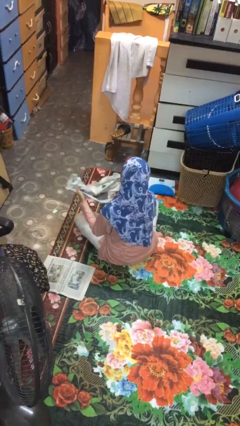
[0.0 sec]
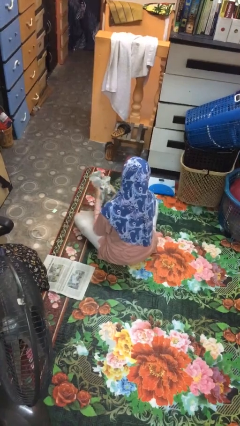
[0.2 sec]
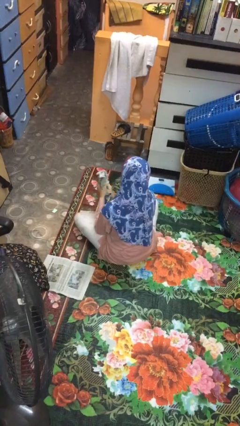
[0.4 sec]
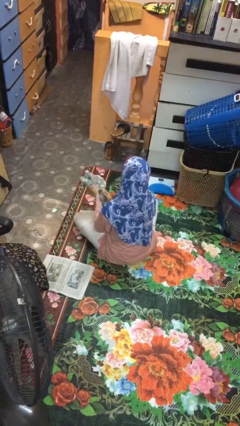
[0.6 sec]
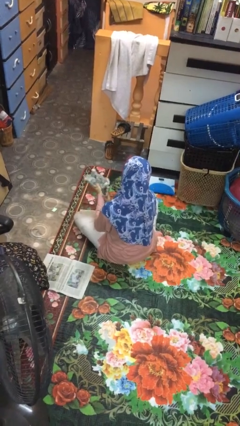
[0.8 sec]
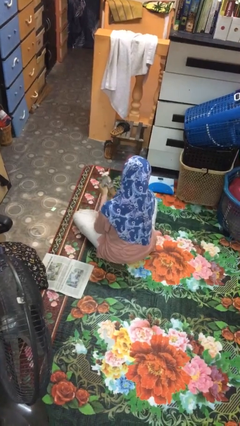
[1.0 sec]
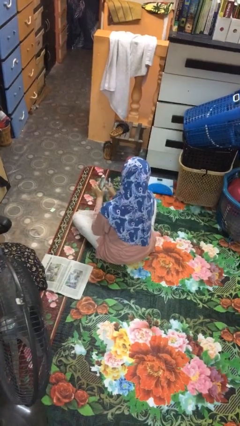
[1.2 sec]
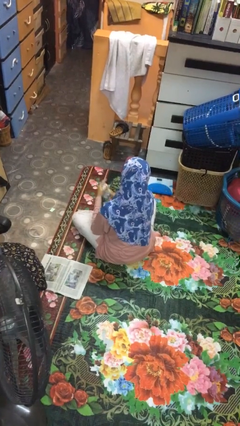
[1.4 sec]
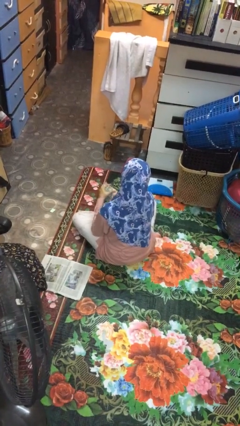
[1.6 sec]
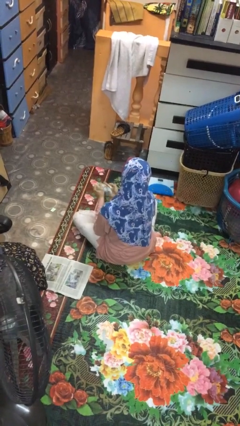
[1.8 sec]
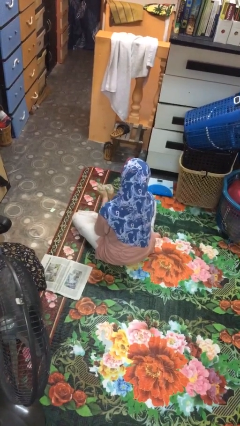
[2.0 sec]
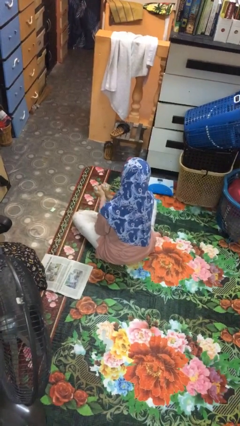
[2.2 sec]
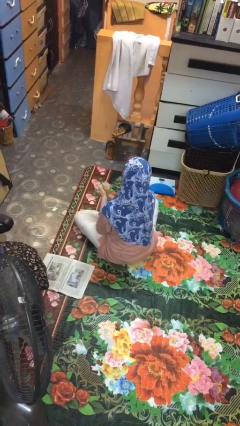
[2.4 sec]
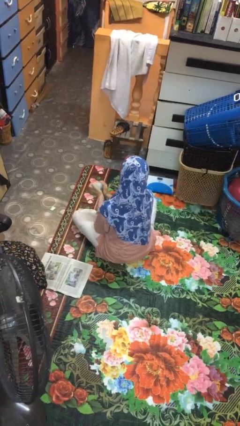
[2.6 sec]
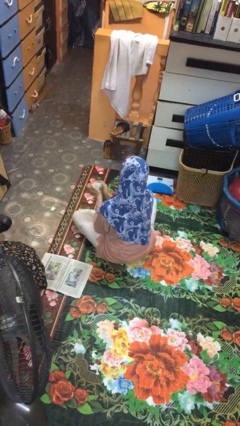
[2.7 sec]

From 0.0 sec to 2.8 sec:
person crumples paper

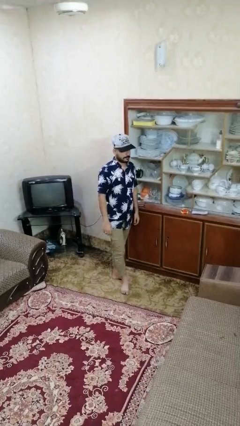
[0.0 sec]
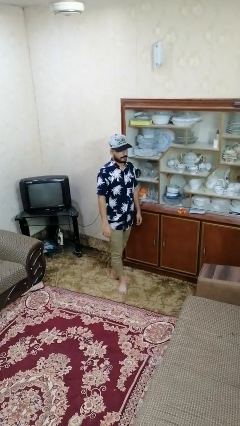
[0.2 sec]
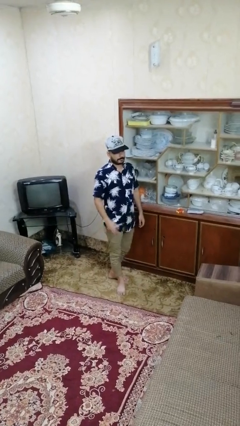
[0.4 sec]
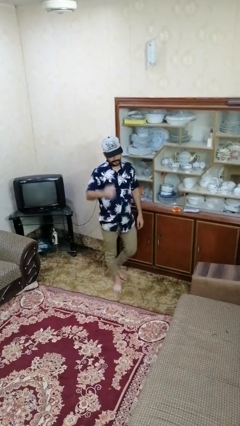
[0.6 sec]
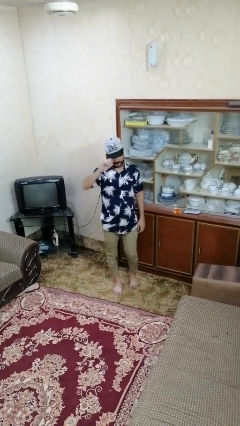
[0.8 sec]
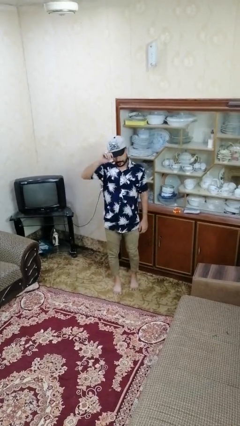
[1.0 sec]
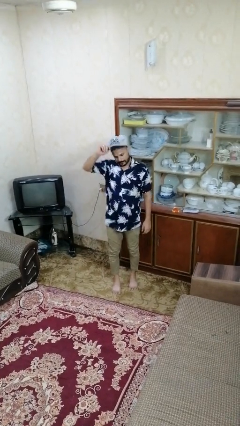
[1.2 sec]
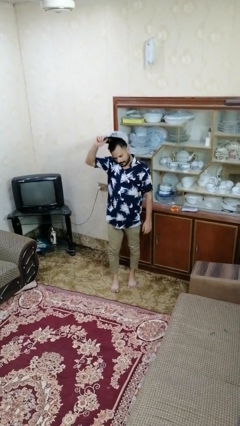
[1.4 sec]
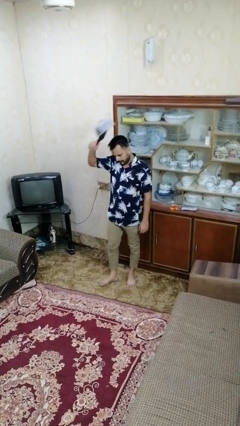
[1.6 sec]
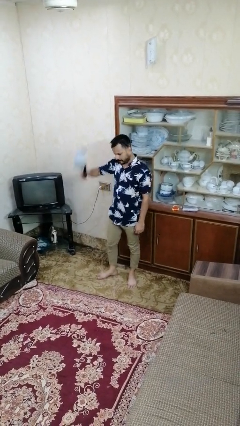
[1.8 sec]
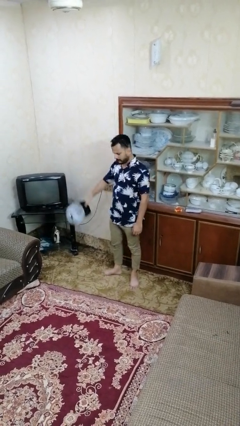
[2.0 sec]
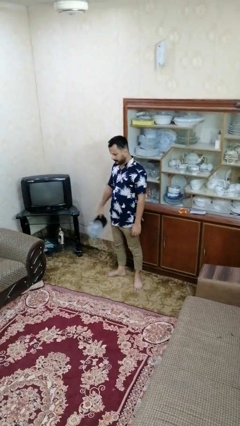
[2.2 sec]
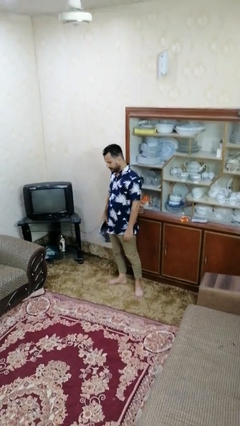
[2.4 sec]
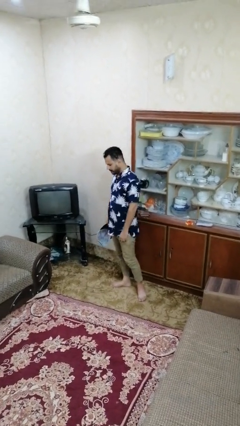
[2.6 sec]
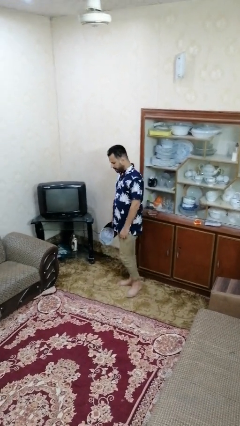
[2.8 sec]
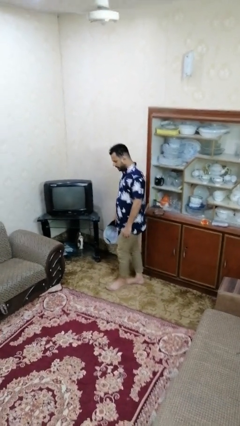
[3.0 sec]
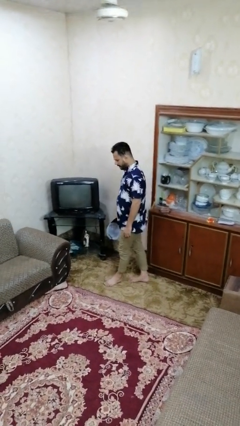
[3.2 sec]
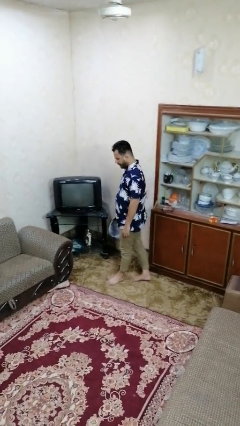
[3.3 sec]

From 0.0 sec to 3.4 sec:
person takes off hat

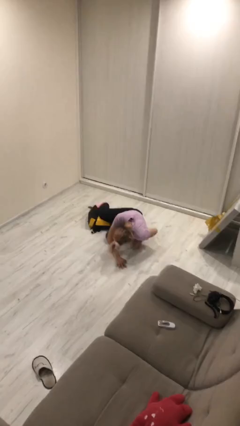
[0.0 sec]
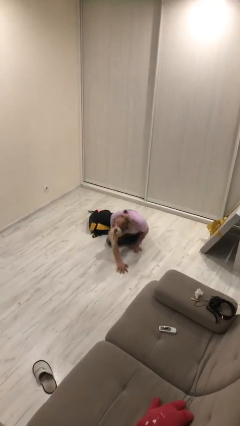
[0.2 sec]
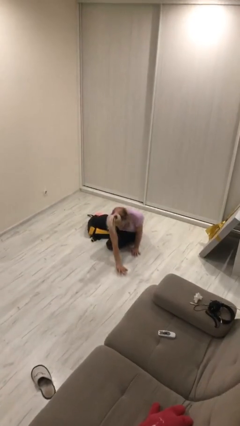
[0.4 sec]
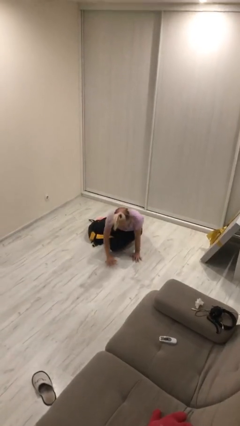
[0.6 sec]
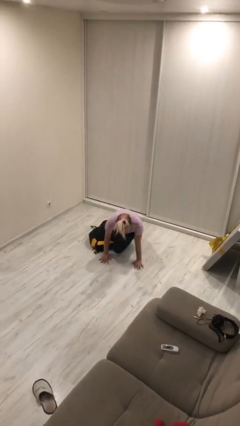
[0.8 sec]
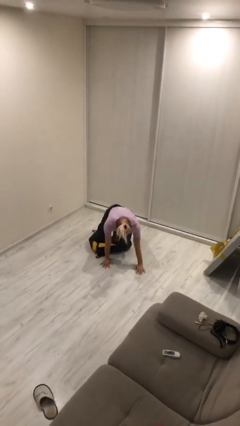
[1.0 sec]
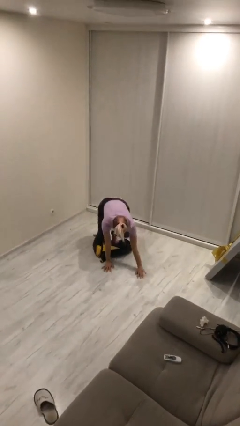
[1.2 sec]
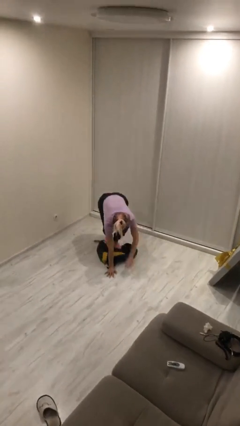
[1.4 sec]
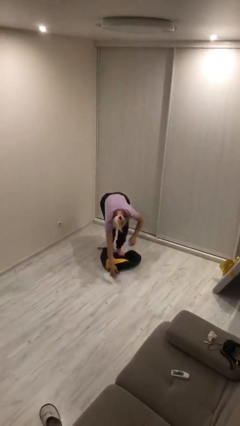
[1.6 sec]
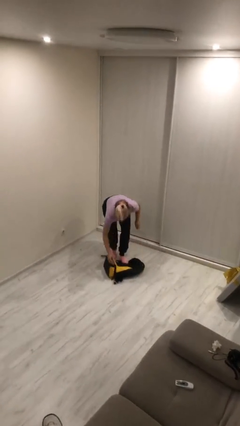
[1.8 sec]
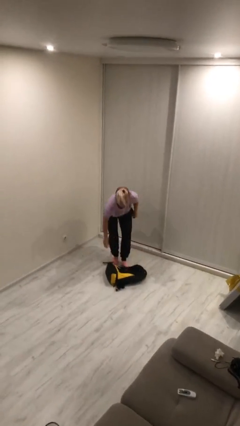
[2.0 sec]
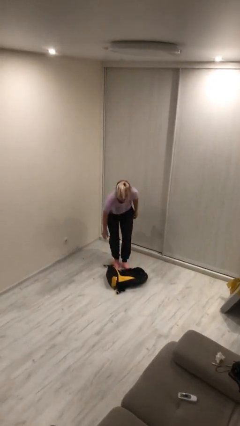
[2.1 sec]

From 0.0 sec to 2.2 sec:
person stands up from floor

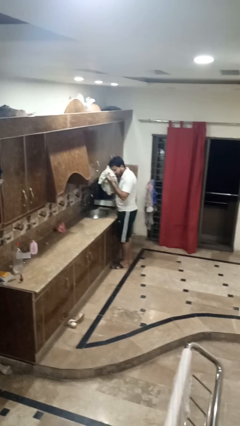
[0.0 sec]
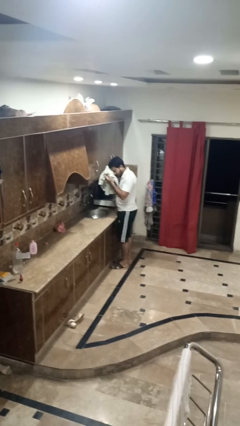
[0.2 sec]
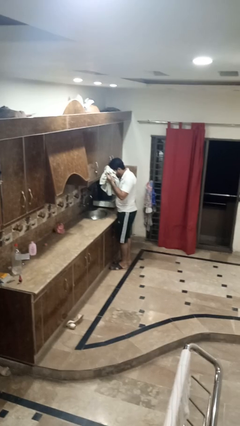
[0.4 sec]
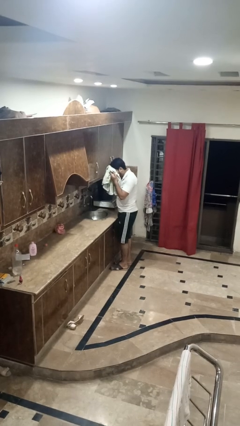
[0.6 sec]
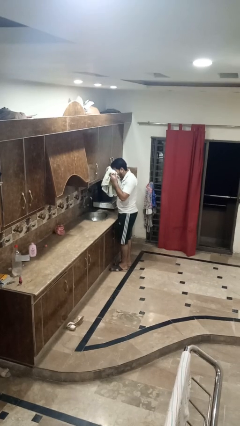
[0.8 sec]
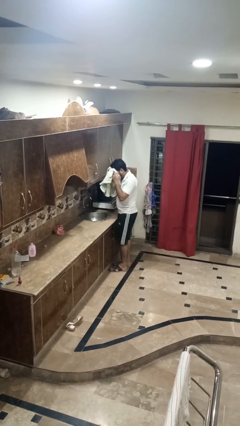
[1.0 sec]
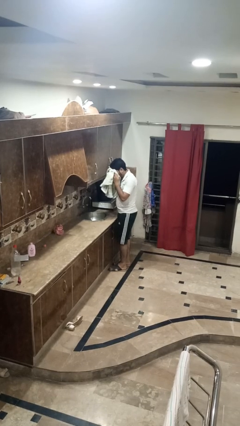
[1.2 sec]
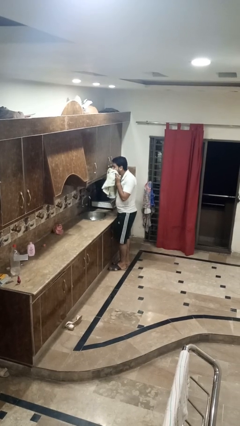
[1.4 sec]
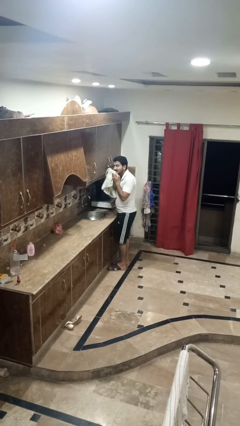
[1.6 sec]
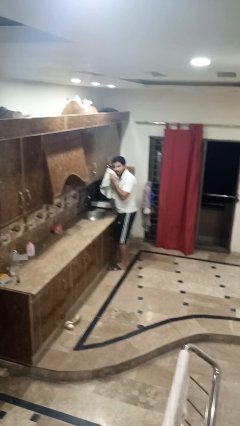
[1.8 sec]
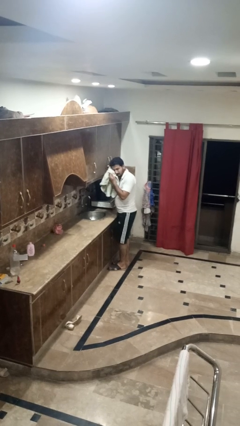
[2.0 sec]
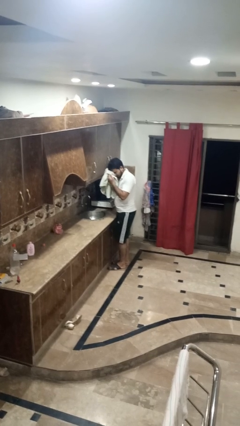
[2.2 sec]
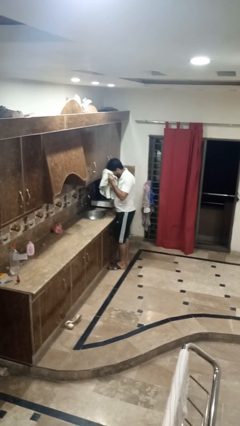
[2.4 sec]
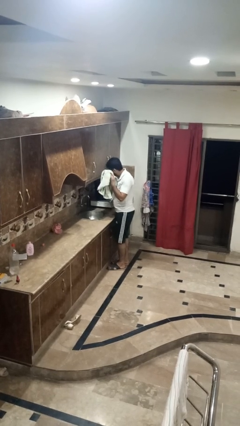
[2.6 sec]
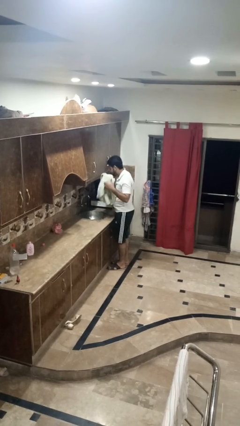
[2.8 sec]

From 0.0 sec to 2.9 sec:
person dries face with towel

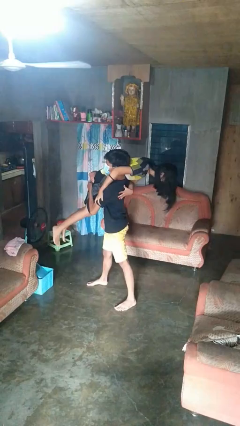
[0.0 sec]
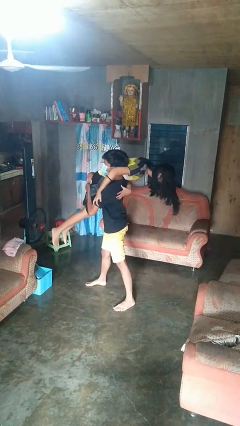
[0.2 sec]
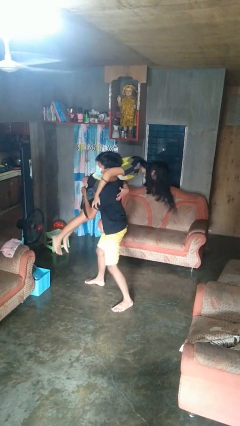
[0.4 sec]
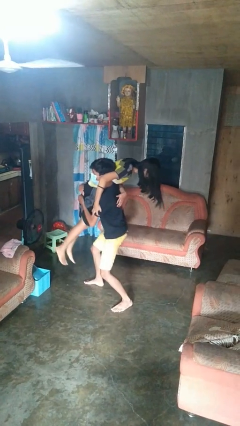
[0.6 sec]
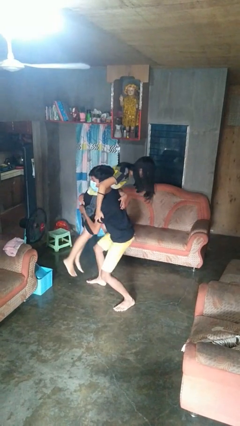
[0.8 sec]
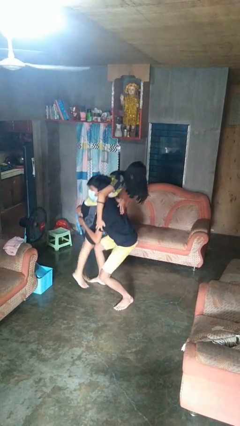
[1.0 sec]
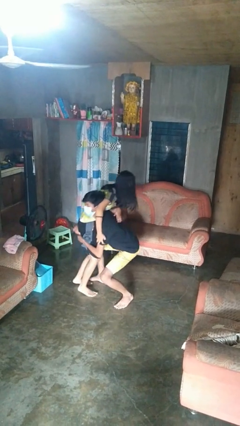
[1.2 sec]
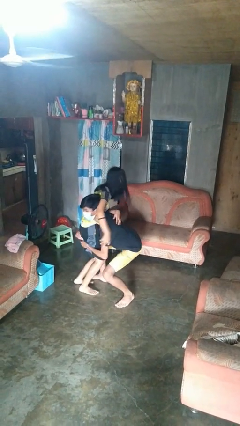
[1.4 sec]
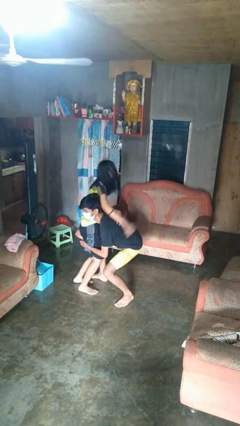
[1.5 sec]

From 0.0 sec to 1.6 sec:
person puts down person

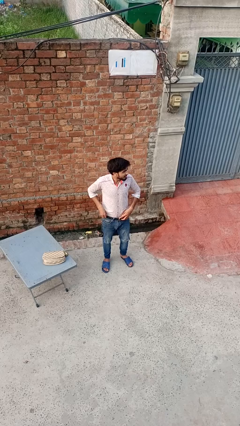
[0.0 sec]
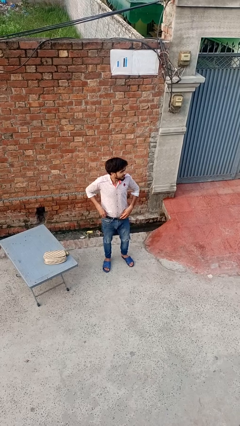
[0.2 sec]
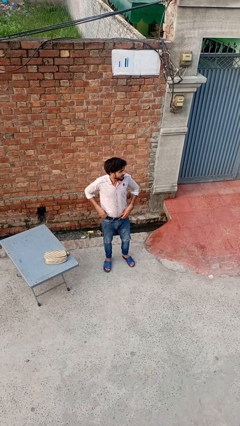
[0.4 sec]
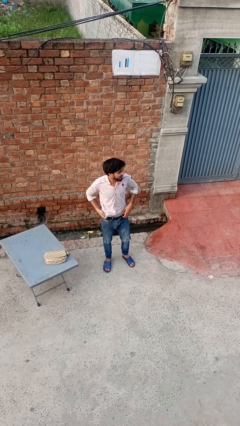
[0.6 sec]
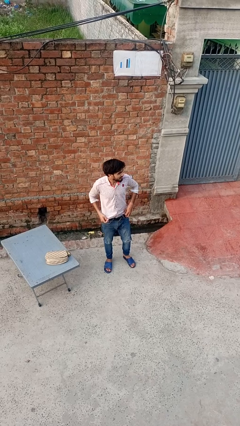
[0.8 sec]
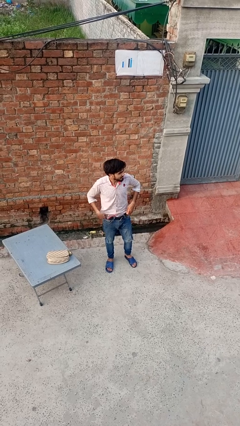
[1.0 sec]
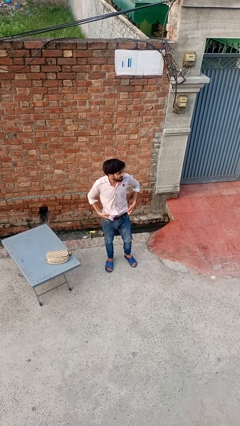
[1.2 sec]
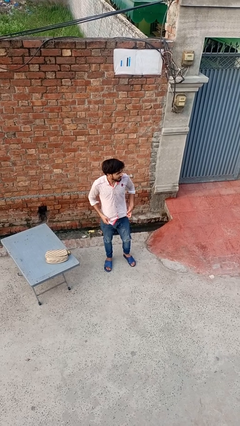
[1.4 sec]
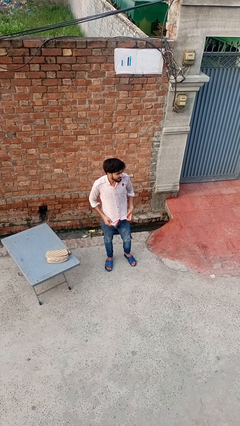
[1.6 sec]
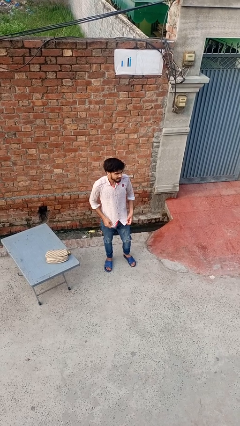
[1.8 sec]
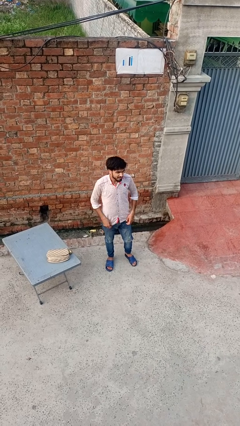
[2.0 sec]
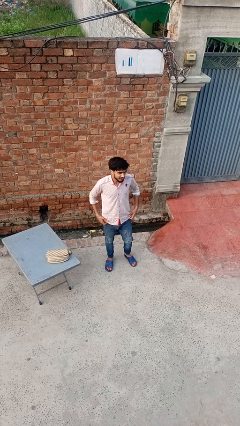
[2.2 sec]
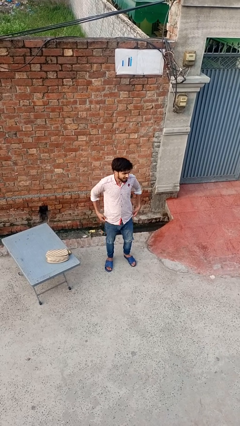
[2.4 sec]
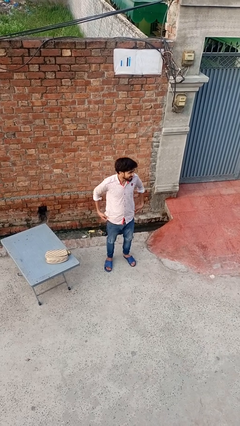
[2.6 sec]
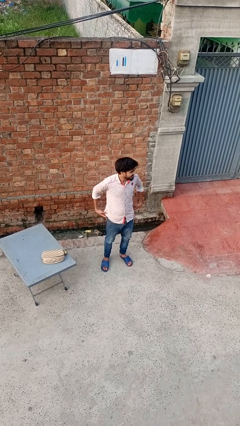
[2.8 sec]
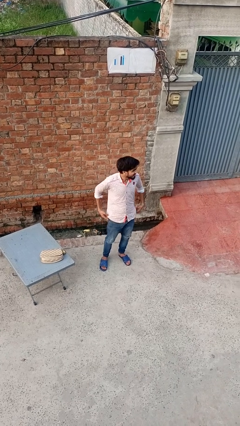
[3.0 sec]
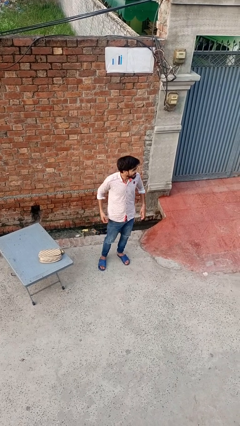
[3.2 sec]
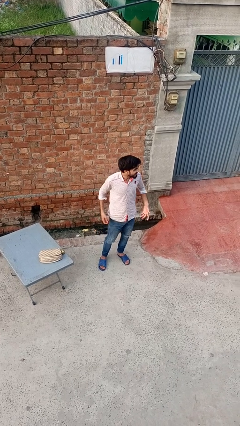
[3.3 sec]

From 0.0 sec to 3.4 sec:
person untucks shirt

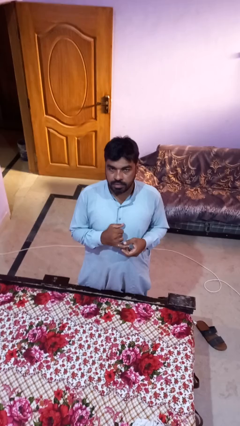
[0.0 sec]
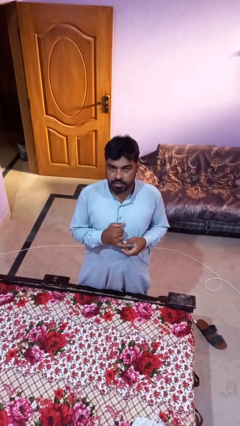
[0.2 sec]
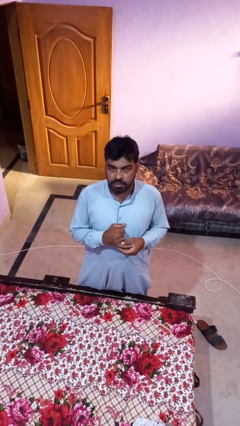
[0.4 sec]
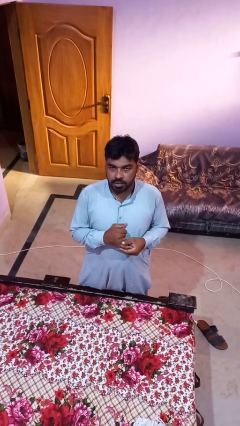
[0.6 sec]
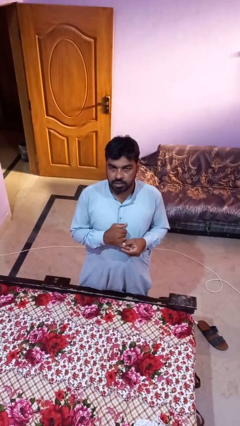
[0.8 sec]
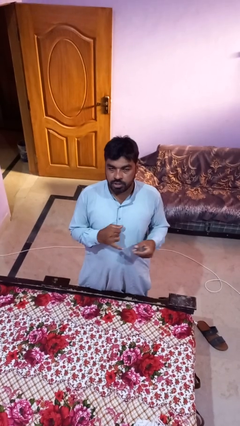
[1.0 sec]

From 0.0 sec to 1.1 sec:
person takes off ring
